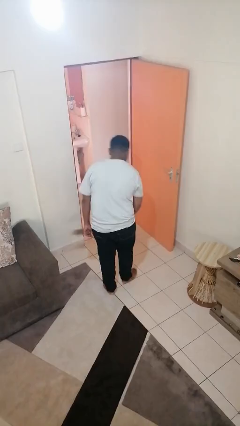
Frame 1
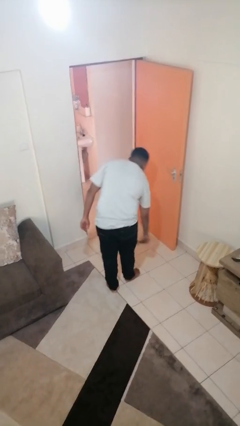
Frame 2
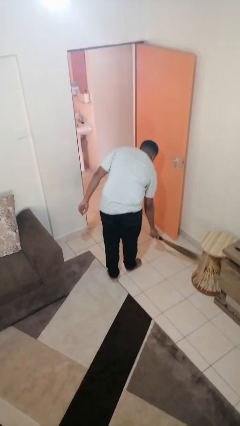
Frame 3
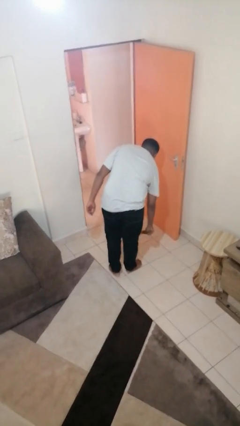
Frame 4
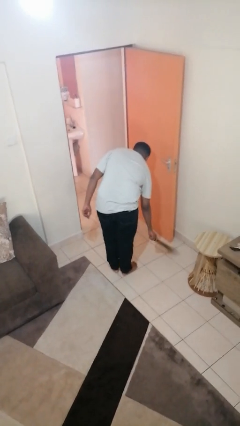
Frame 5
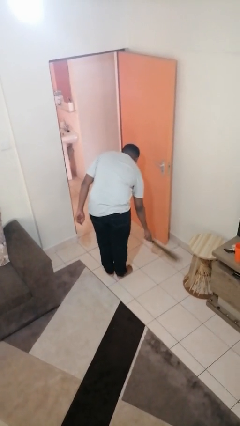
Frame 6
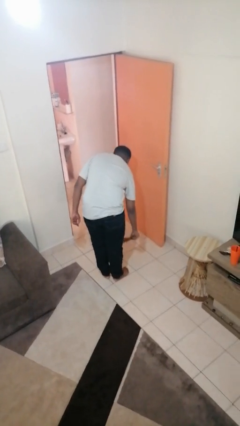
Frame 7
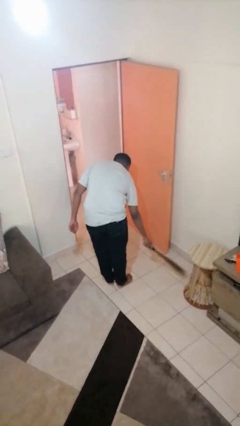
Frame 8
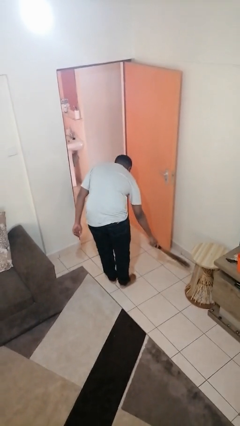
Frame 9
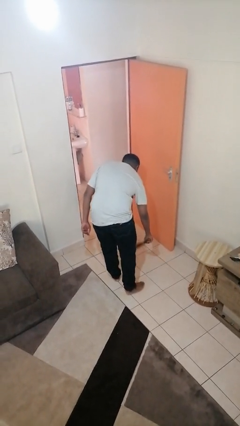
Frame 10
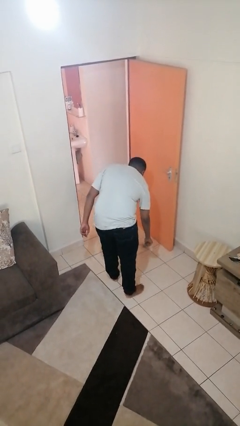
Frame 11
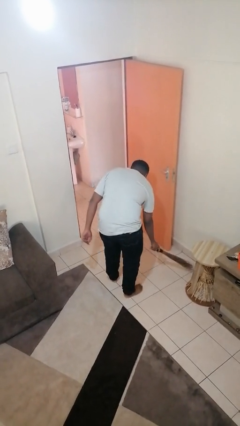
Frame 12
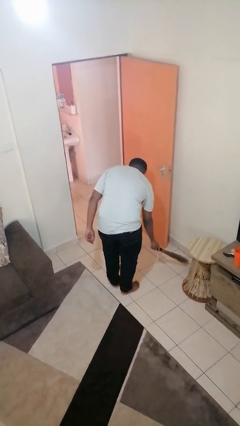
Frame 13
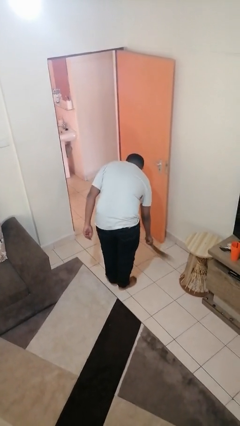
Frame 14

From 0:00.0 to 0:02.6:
person sweeps floor

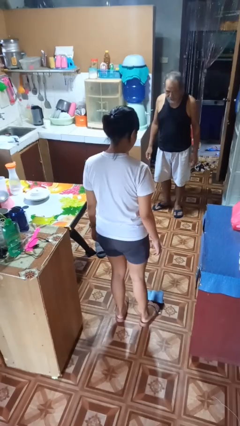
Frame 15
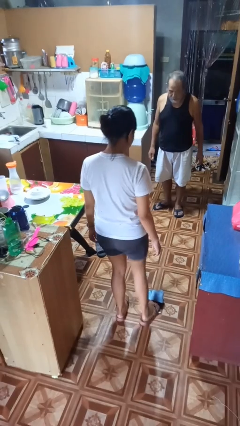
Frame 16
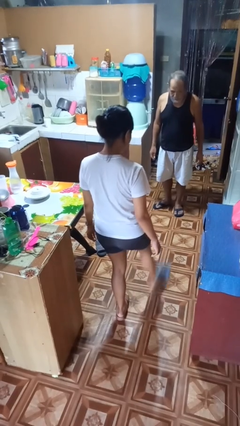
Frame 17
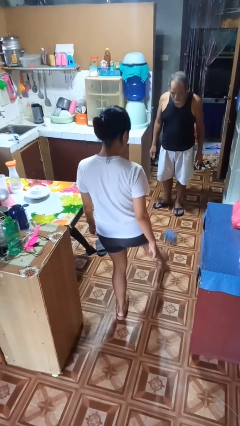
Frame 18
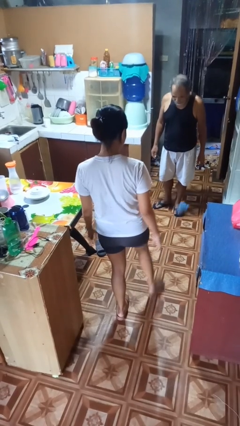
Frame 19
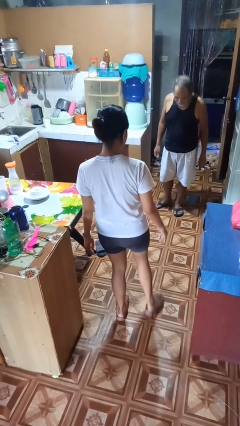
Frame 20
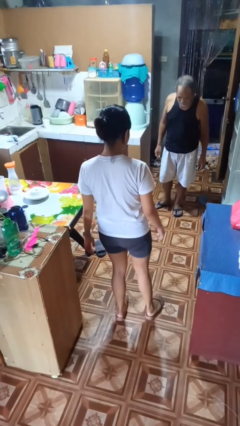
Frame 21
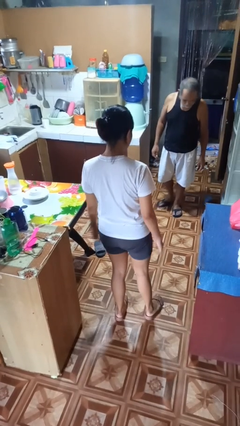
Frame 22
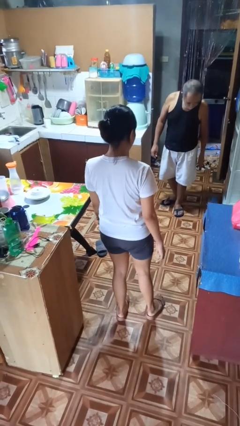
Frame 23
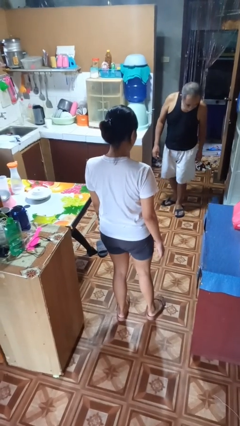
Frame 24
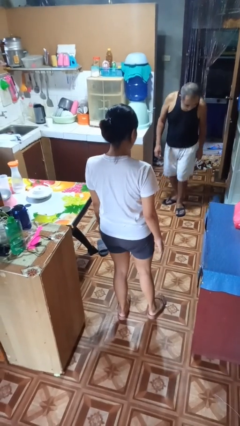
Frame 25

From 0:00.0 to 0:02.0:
person kicks object to person

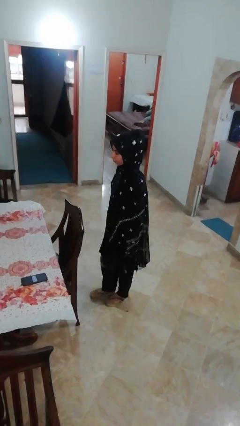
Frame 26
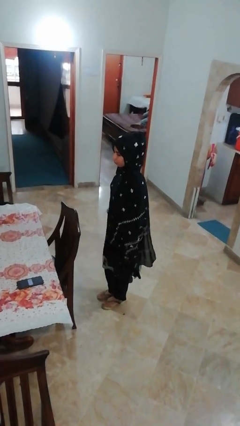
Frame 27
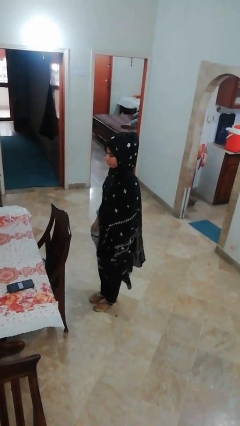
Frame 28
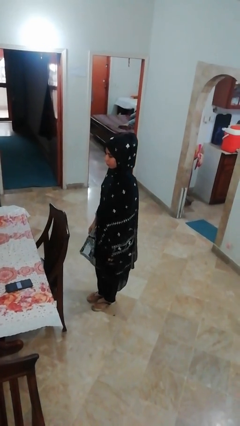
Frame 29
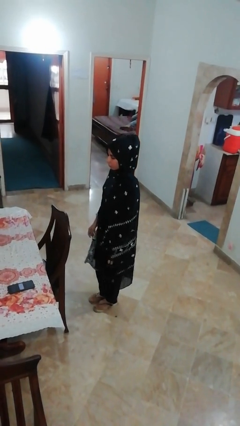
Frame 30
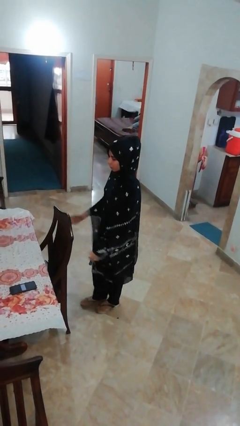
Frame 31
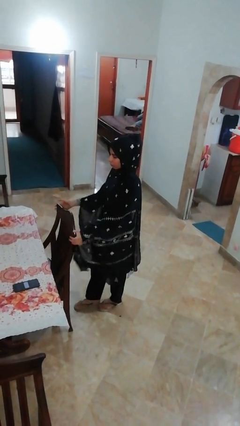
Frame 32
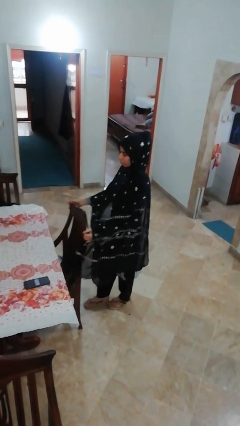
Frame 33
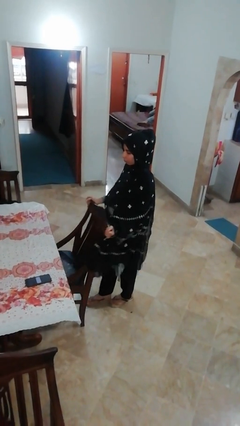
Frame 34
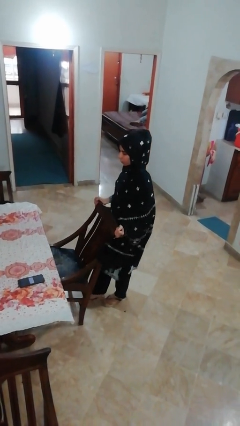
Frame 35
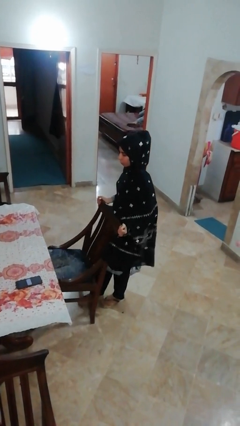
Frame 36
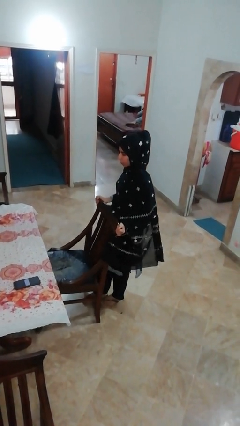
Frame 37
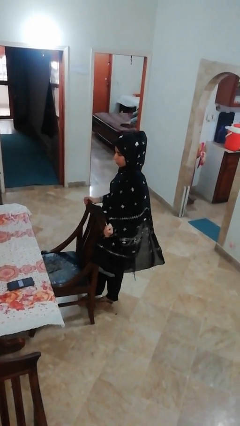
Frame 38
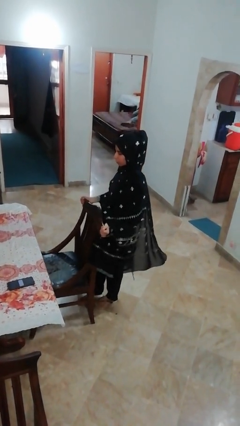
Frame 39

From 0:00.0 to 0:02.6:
person pulls out chair

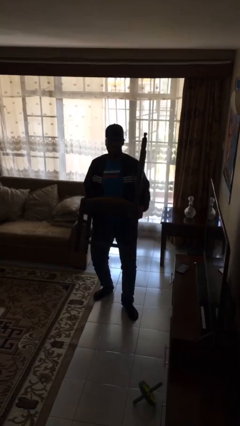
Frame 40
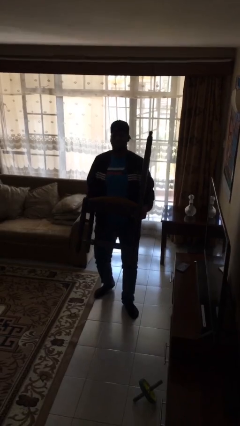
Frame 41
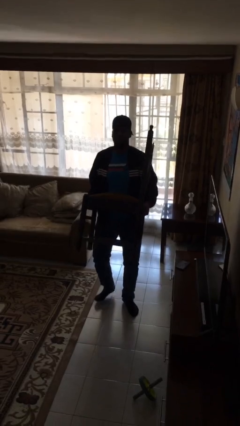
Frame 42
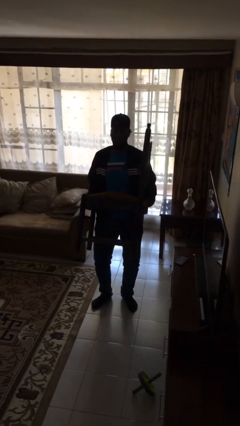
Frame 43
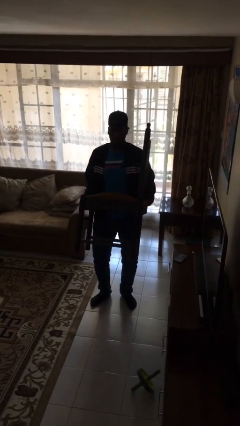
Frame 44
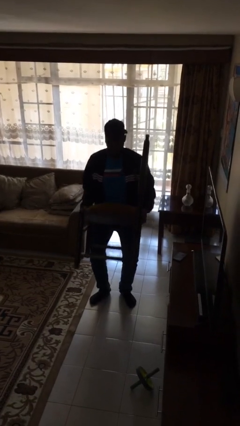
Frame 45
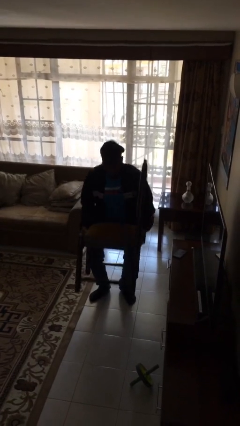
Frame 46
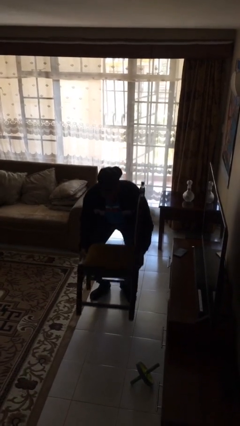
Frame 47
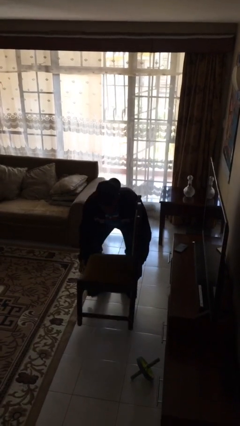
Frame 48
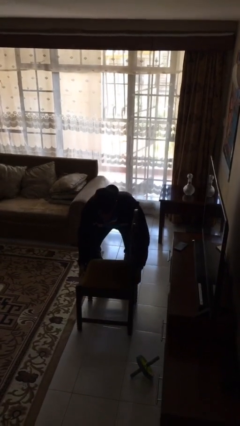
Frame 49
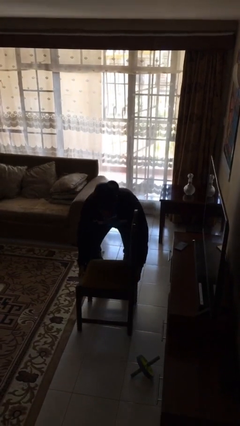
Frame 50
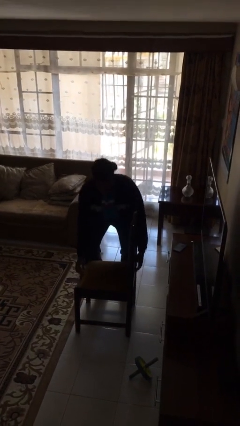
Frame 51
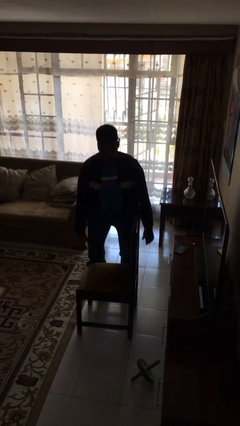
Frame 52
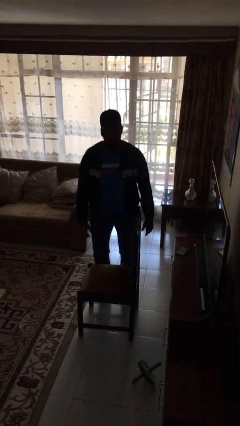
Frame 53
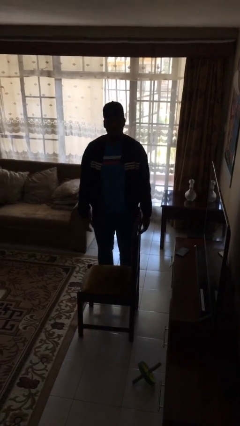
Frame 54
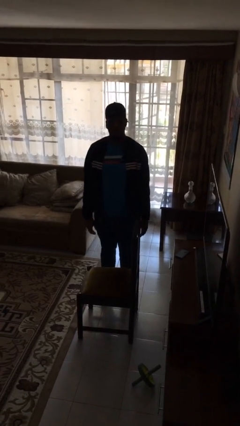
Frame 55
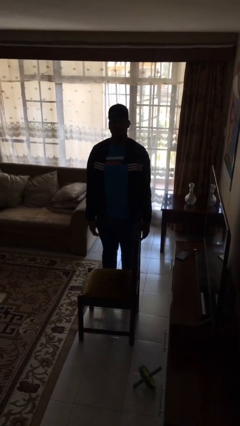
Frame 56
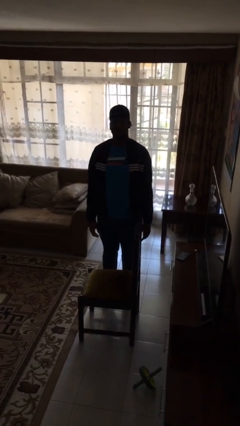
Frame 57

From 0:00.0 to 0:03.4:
person puts down object on floor

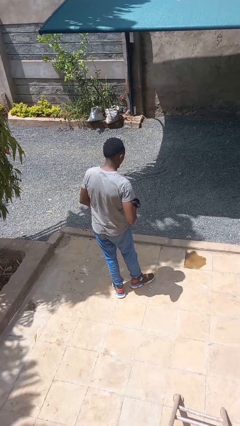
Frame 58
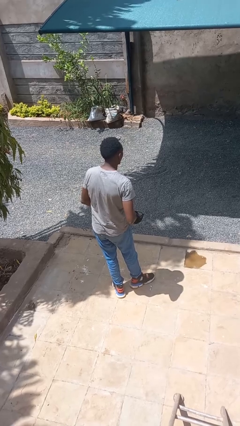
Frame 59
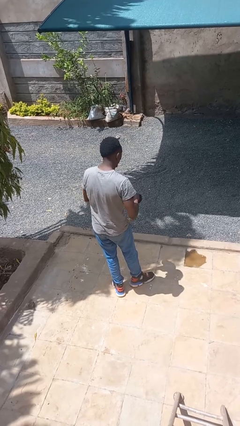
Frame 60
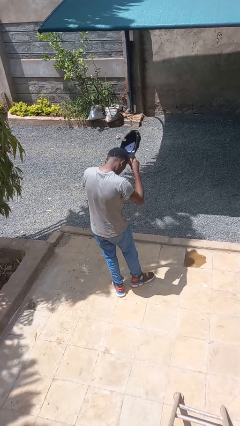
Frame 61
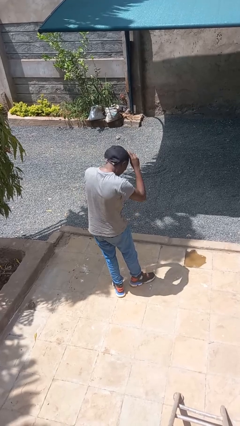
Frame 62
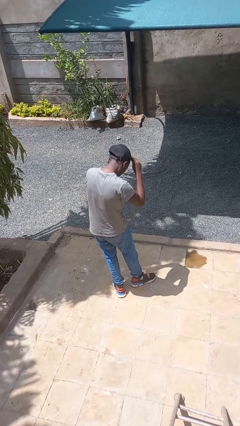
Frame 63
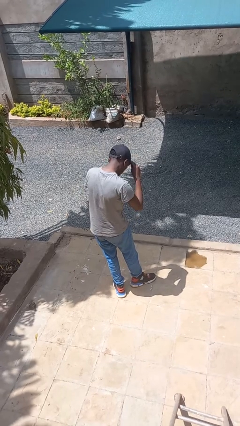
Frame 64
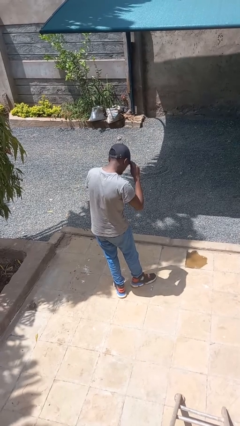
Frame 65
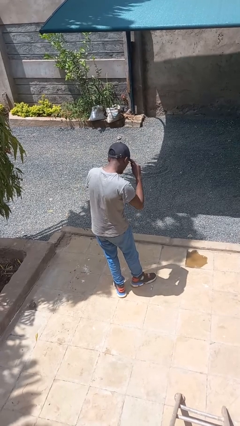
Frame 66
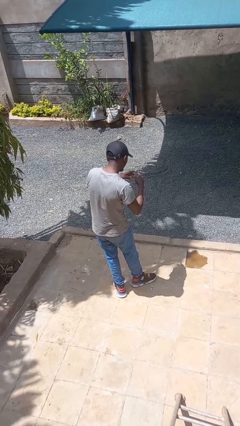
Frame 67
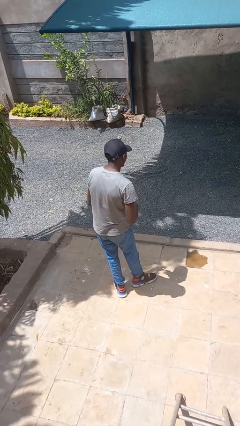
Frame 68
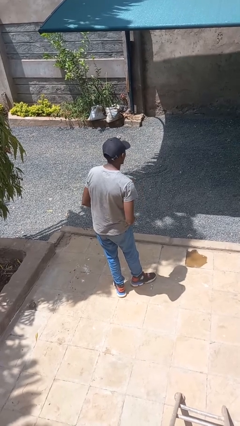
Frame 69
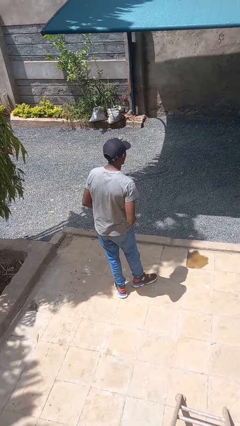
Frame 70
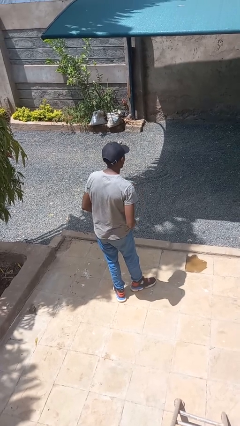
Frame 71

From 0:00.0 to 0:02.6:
person puts on hat

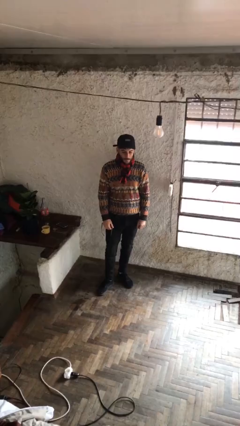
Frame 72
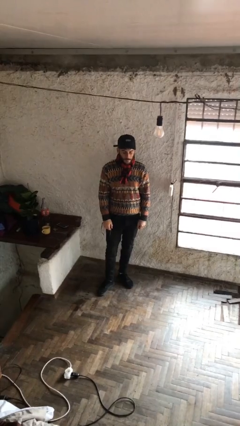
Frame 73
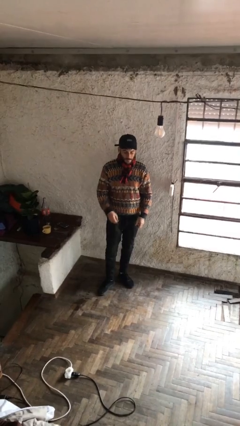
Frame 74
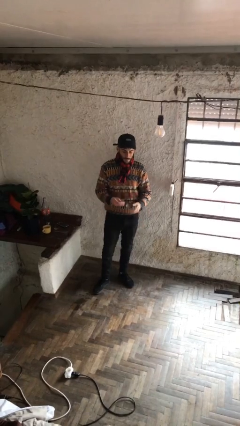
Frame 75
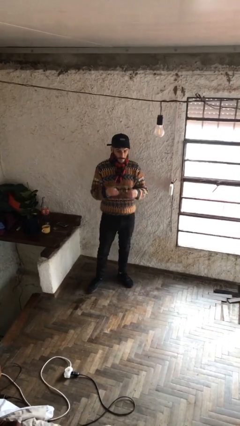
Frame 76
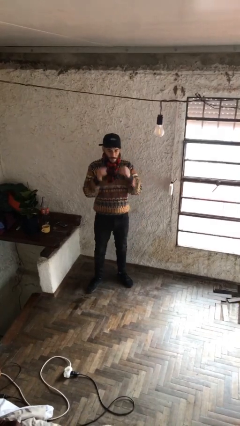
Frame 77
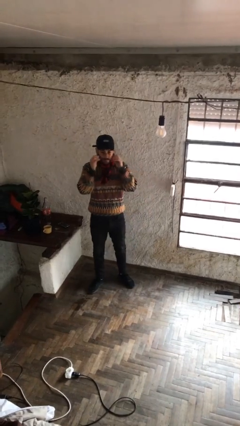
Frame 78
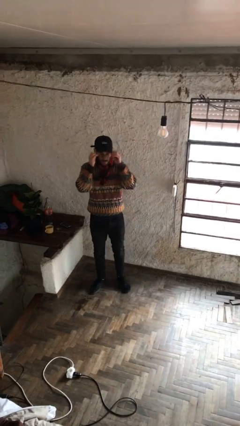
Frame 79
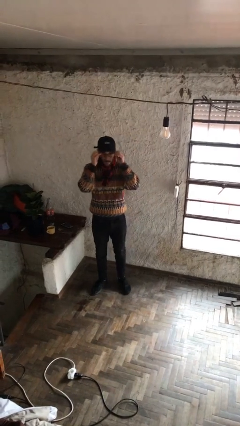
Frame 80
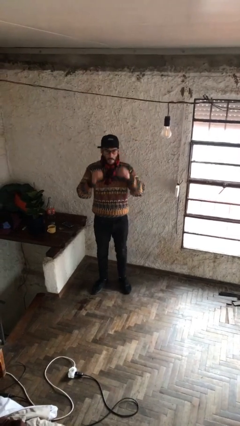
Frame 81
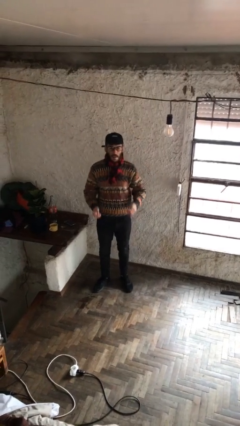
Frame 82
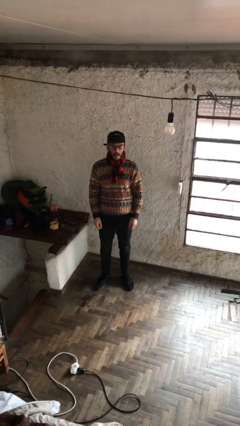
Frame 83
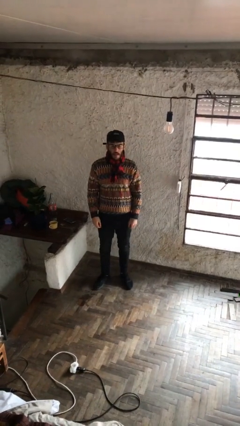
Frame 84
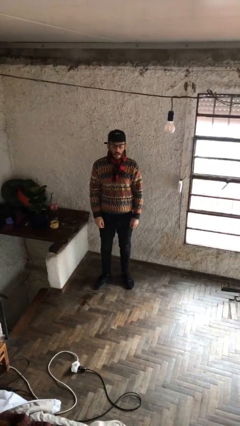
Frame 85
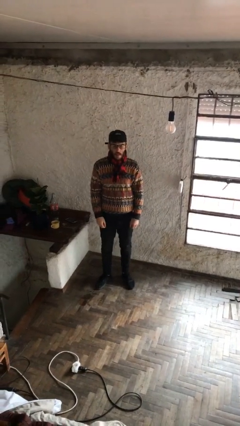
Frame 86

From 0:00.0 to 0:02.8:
person puts on glasses

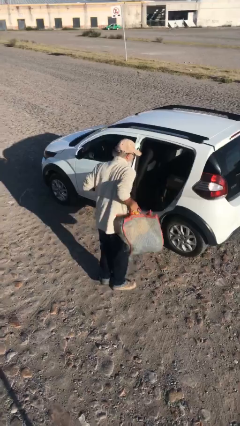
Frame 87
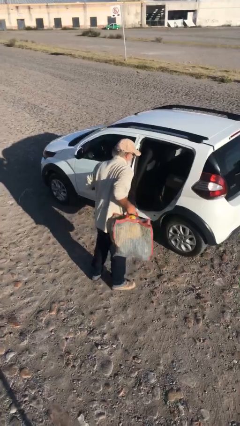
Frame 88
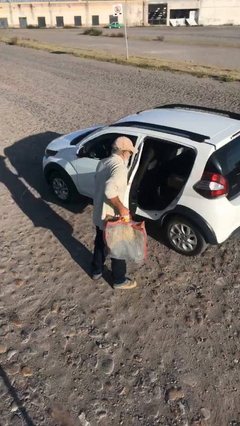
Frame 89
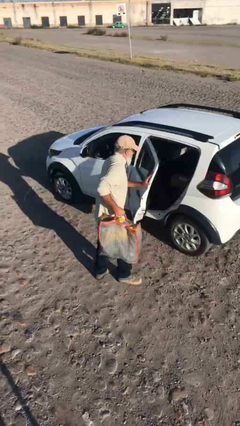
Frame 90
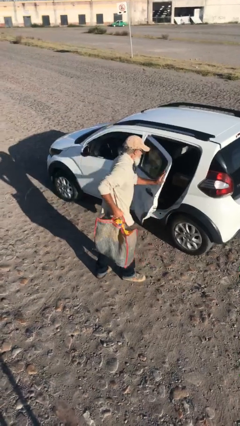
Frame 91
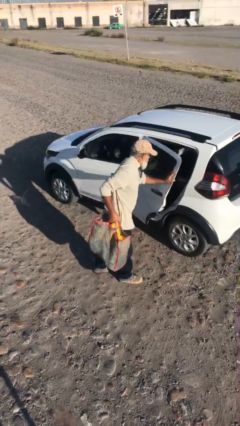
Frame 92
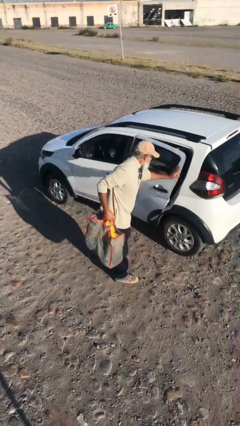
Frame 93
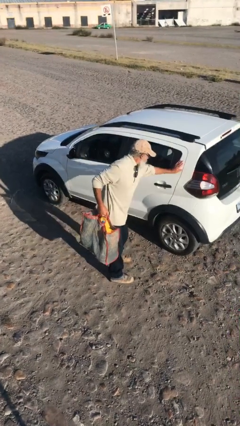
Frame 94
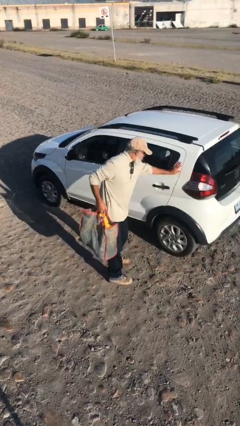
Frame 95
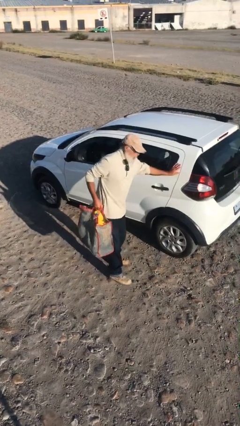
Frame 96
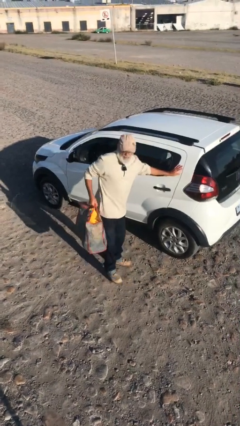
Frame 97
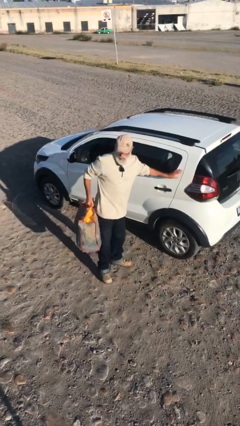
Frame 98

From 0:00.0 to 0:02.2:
person closes car door
